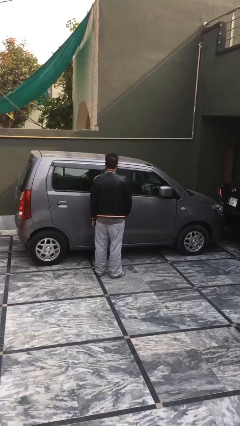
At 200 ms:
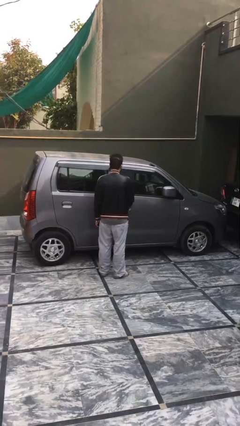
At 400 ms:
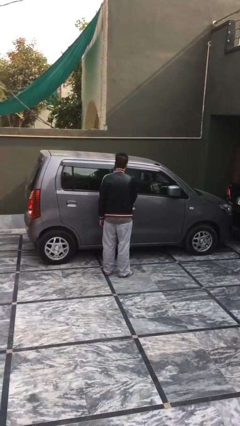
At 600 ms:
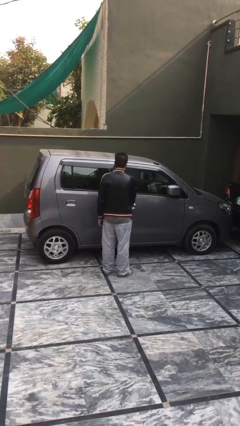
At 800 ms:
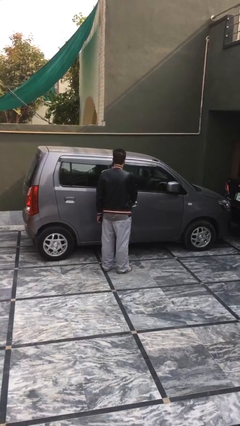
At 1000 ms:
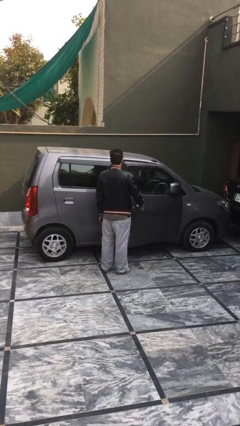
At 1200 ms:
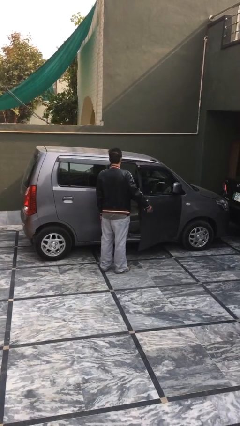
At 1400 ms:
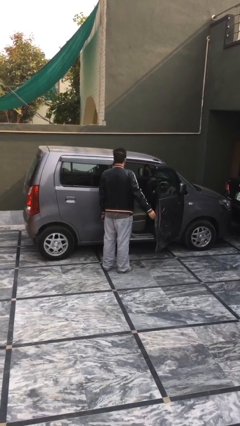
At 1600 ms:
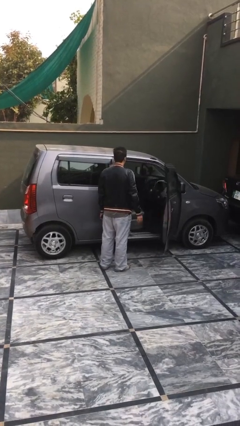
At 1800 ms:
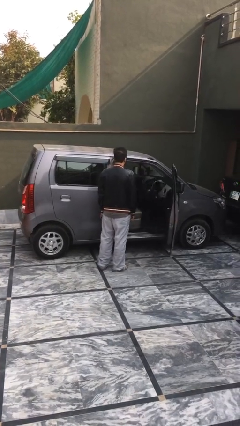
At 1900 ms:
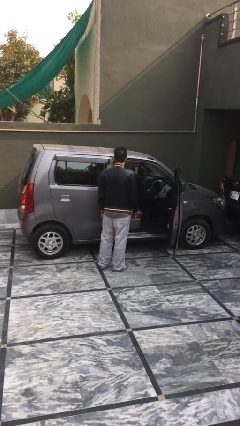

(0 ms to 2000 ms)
person opens car door

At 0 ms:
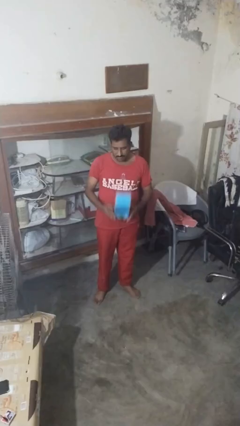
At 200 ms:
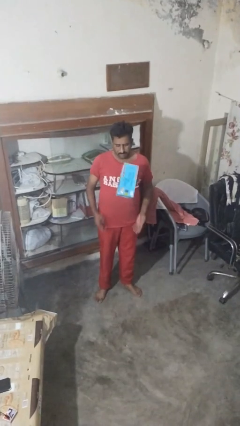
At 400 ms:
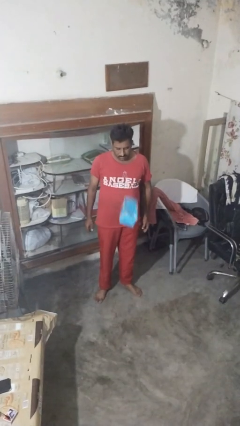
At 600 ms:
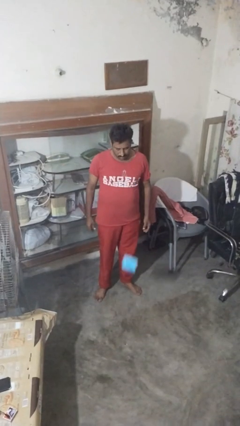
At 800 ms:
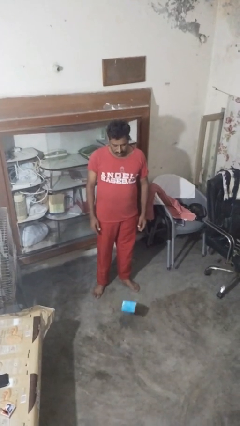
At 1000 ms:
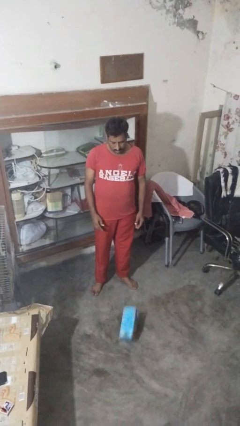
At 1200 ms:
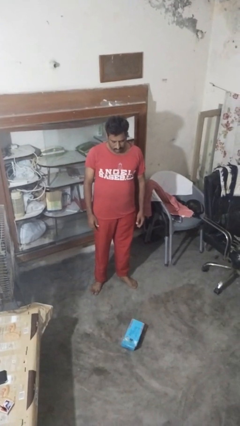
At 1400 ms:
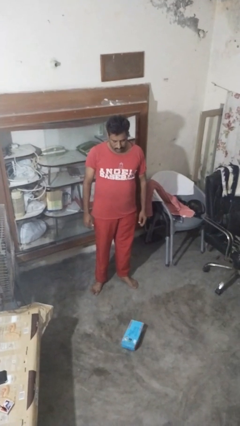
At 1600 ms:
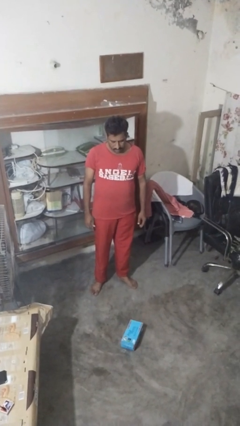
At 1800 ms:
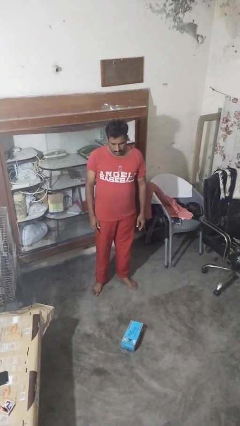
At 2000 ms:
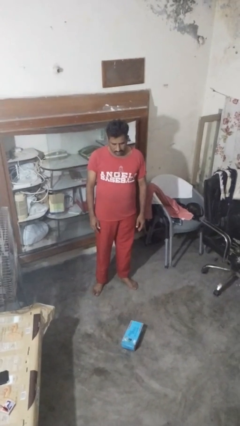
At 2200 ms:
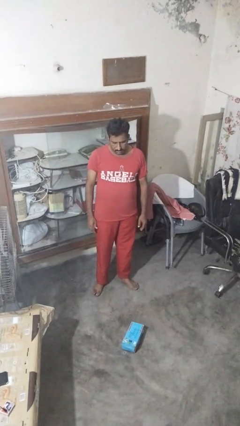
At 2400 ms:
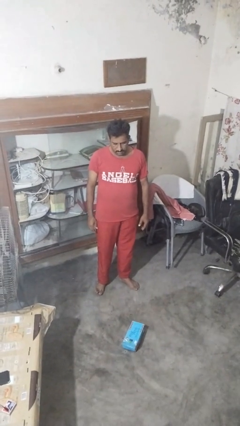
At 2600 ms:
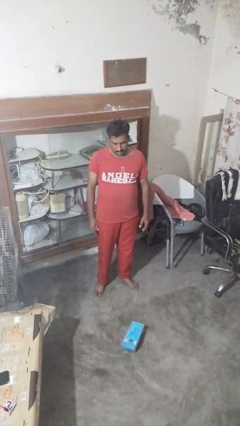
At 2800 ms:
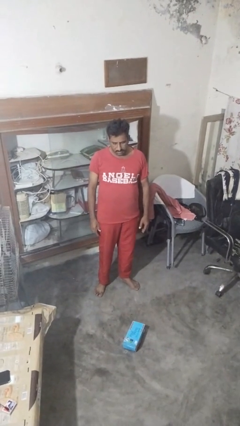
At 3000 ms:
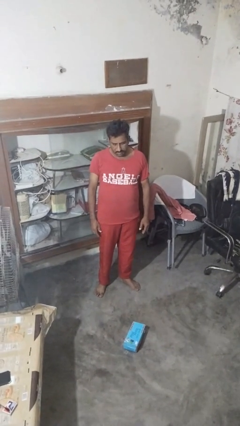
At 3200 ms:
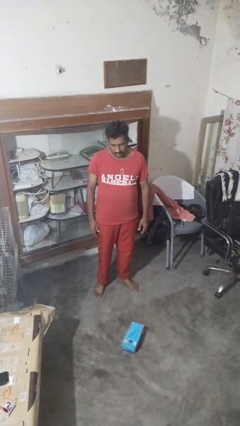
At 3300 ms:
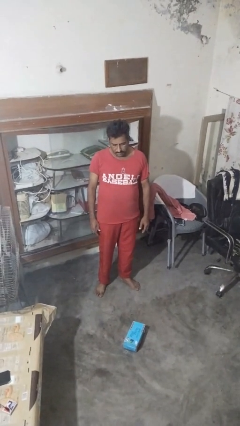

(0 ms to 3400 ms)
person throws object into air

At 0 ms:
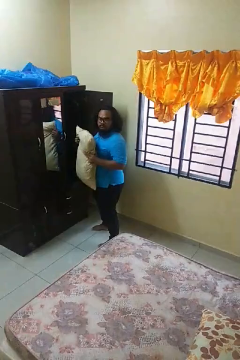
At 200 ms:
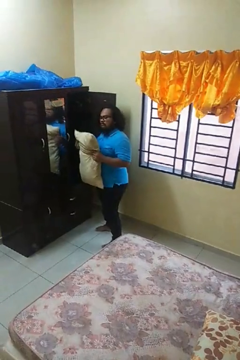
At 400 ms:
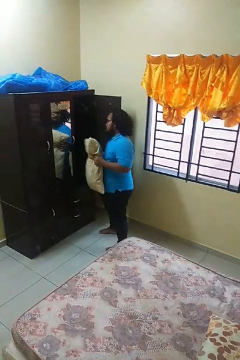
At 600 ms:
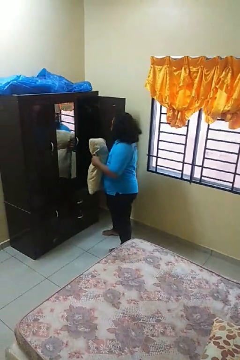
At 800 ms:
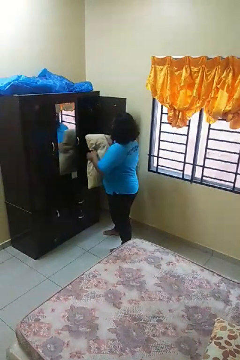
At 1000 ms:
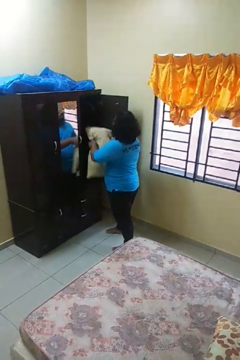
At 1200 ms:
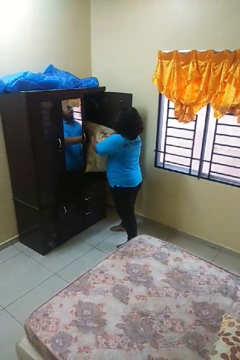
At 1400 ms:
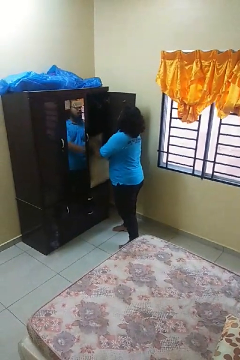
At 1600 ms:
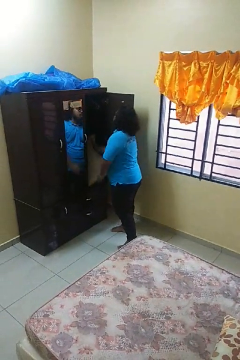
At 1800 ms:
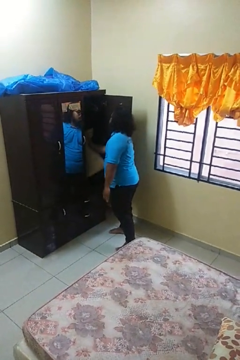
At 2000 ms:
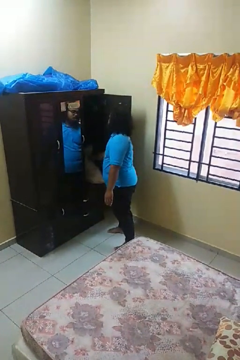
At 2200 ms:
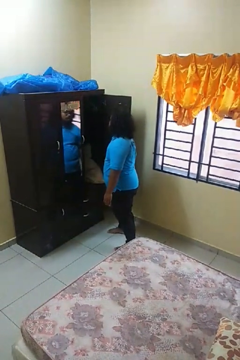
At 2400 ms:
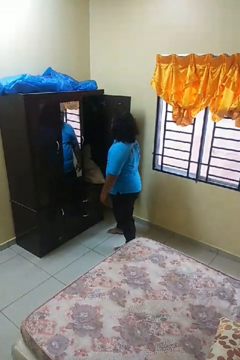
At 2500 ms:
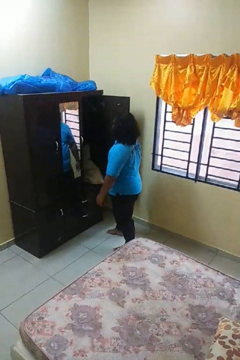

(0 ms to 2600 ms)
person puts down object into cabinet

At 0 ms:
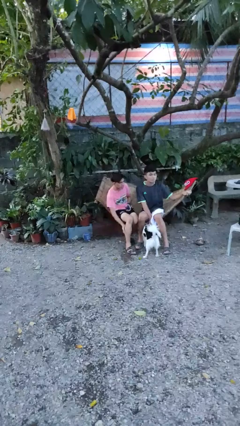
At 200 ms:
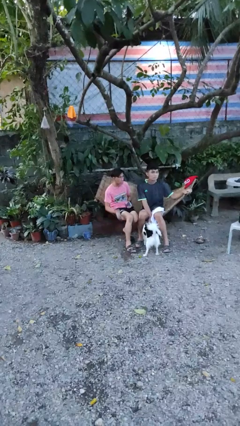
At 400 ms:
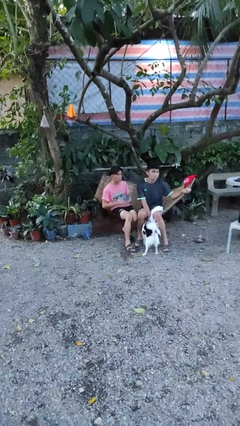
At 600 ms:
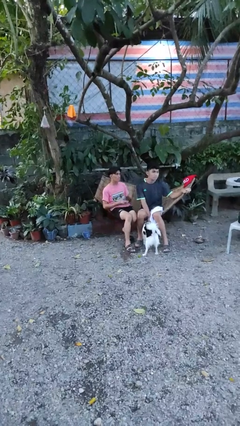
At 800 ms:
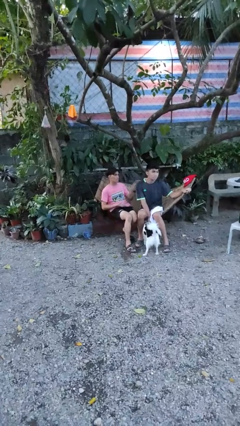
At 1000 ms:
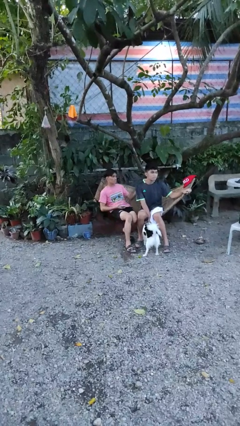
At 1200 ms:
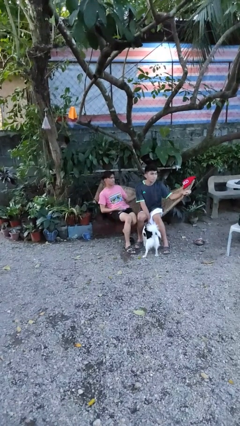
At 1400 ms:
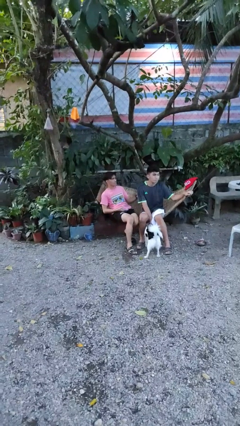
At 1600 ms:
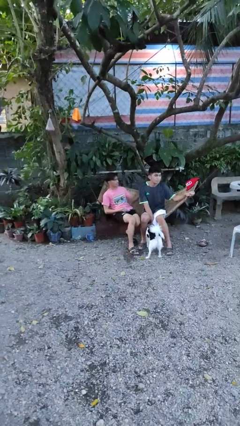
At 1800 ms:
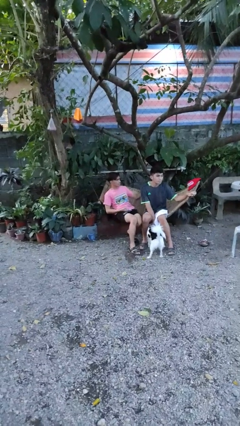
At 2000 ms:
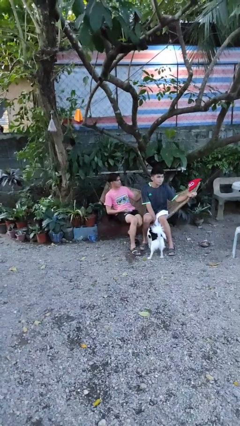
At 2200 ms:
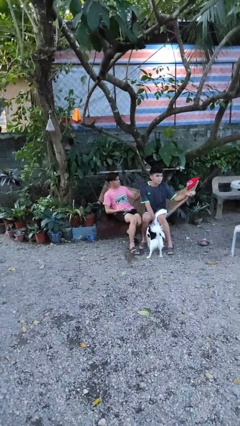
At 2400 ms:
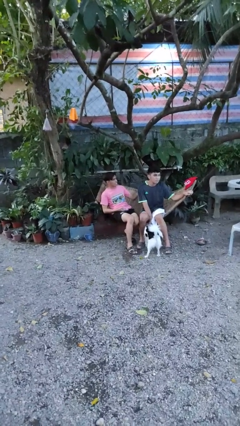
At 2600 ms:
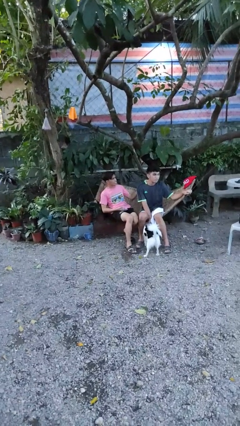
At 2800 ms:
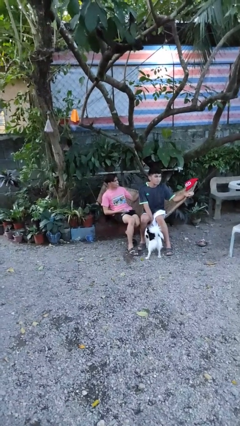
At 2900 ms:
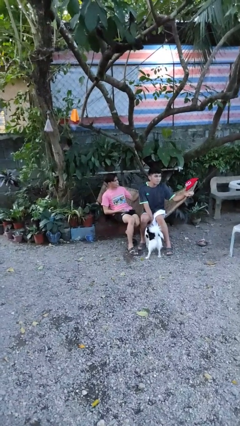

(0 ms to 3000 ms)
person touches back of person

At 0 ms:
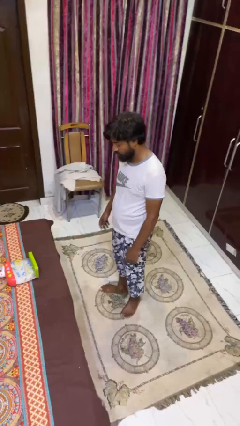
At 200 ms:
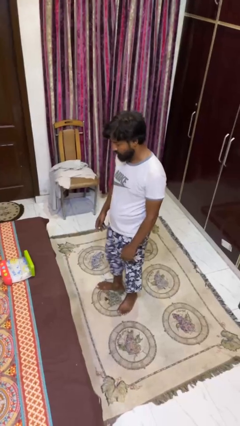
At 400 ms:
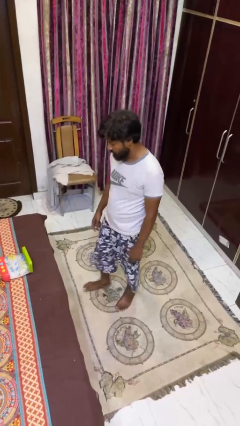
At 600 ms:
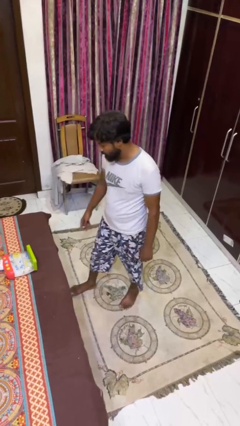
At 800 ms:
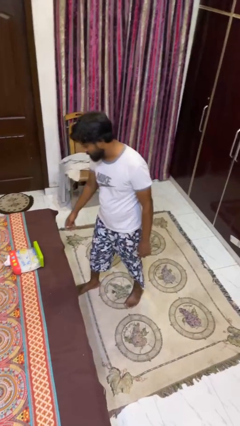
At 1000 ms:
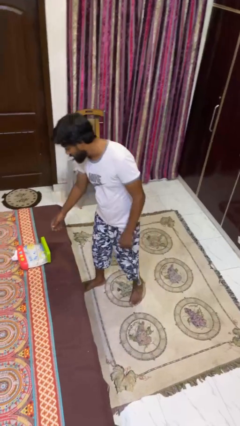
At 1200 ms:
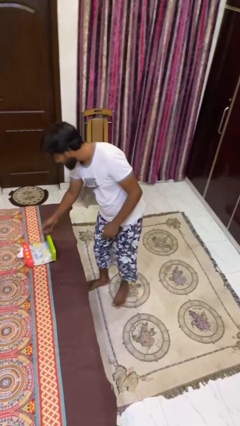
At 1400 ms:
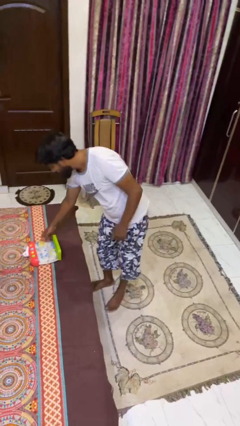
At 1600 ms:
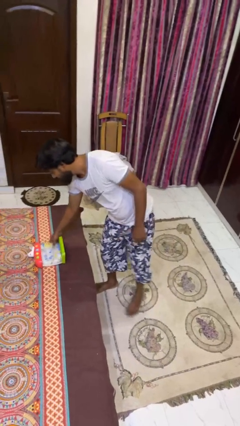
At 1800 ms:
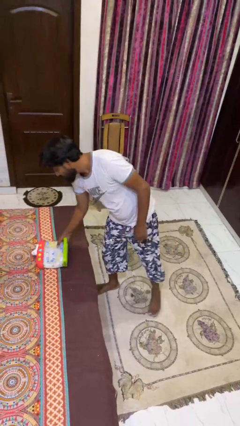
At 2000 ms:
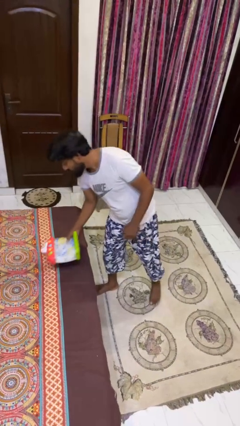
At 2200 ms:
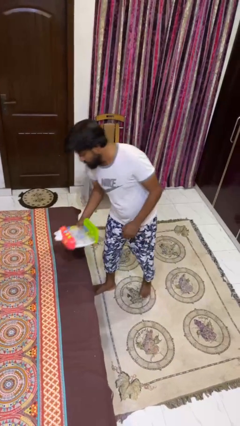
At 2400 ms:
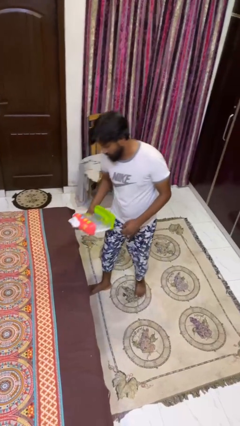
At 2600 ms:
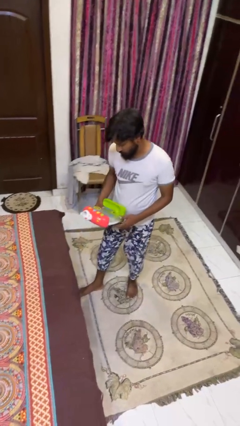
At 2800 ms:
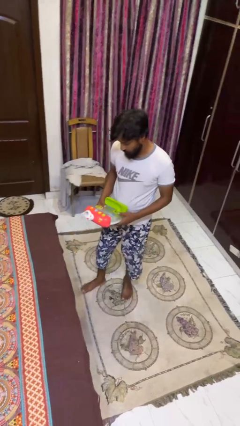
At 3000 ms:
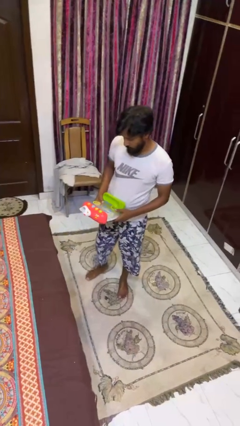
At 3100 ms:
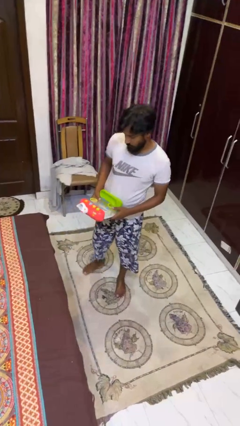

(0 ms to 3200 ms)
person picks up object from bed

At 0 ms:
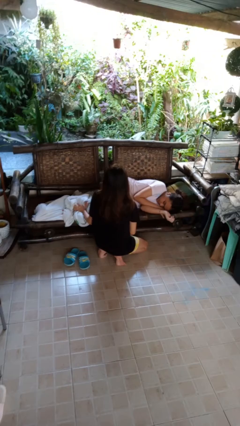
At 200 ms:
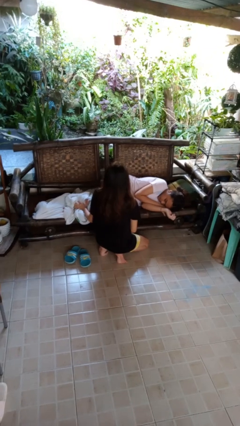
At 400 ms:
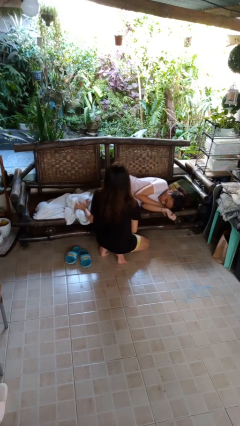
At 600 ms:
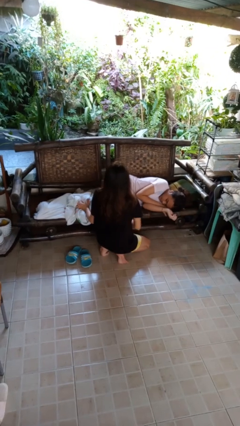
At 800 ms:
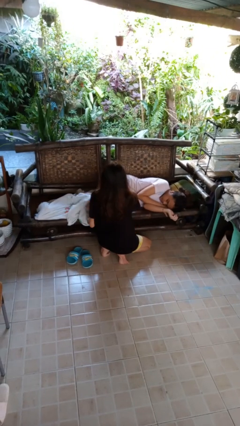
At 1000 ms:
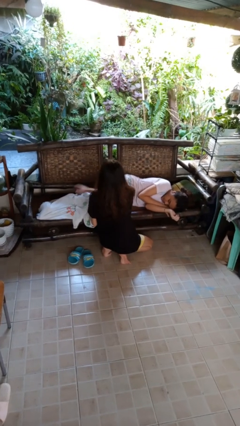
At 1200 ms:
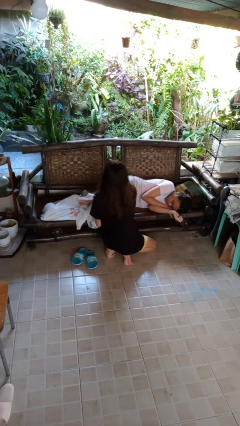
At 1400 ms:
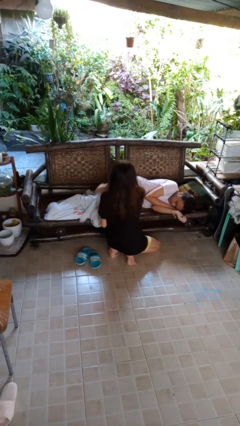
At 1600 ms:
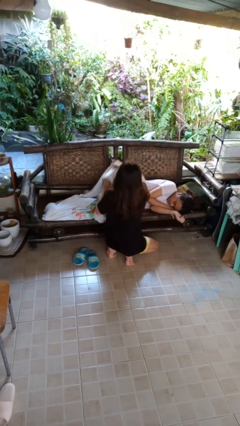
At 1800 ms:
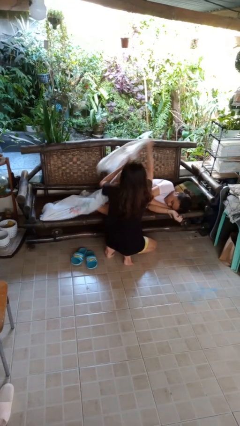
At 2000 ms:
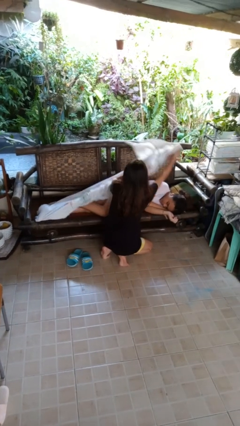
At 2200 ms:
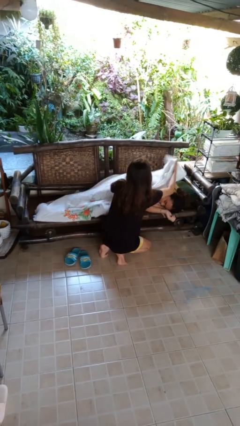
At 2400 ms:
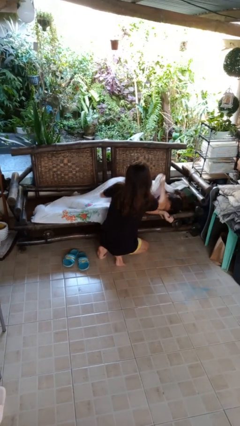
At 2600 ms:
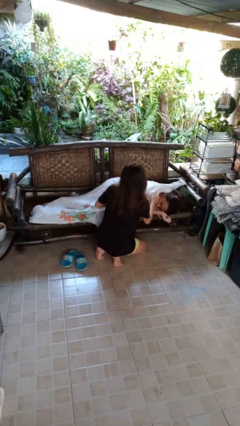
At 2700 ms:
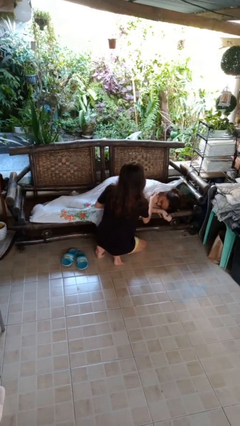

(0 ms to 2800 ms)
person covers friend with blanket

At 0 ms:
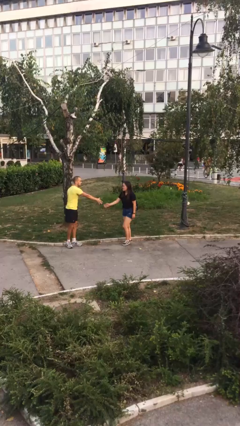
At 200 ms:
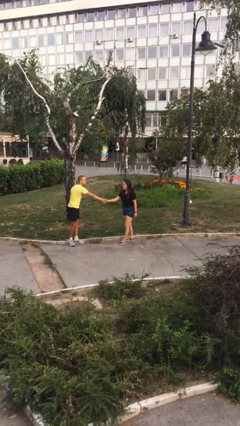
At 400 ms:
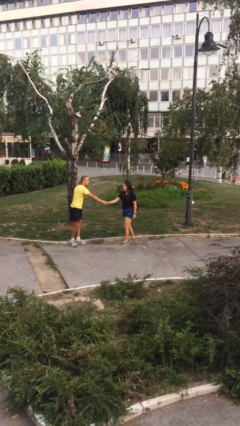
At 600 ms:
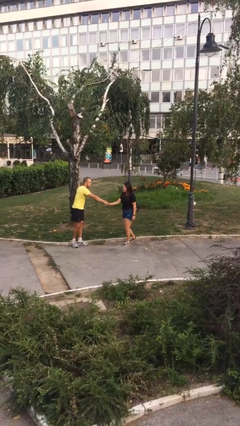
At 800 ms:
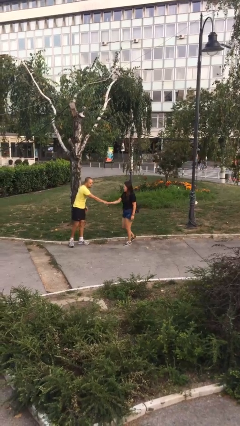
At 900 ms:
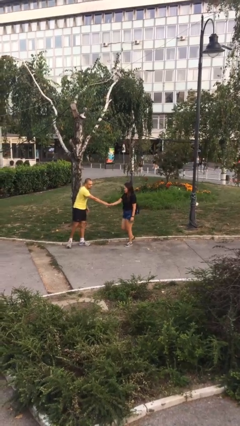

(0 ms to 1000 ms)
person shakes hand
